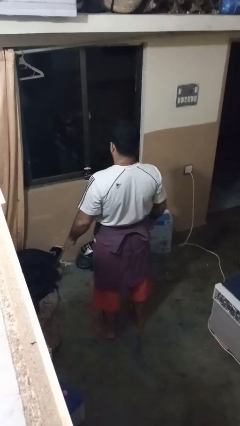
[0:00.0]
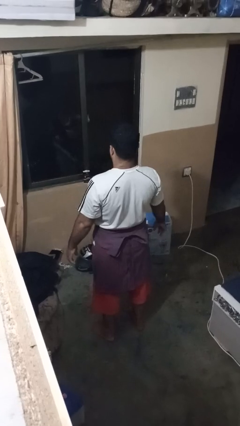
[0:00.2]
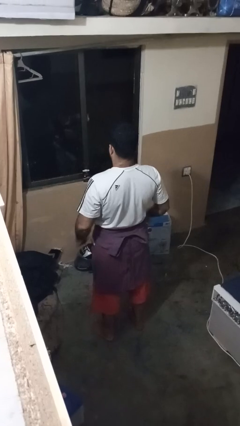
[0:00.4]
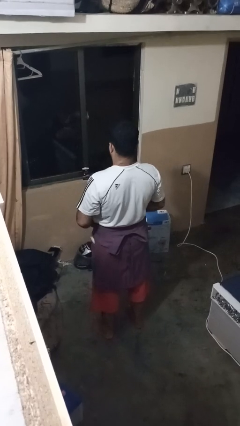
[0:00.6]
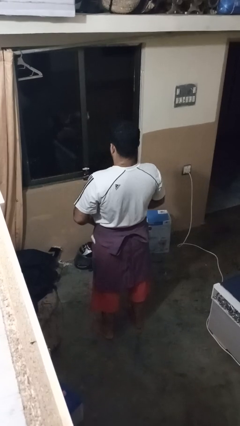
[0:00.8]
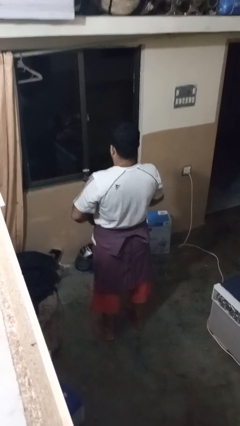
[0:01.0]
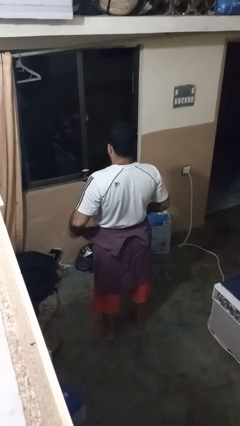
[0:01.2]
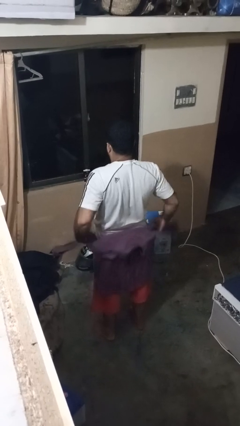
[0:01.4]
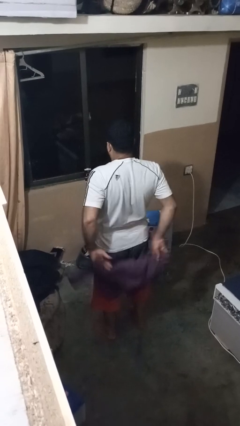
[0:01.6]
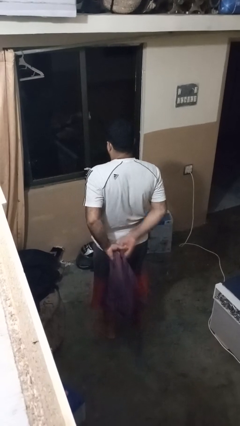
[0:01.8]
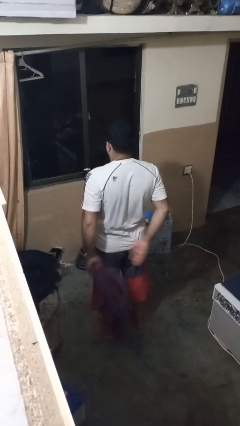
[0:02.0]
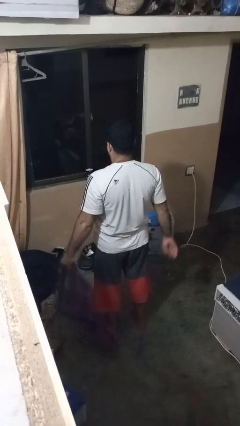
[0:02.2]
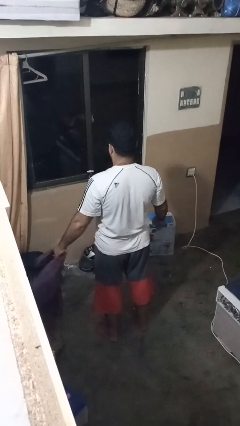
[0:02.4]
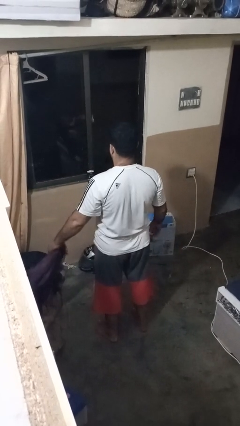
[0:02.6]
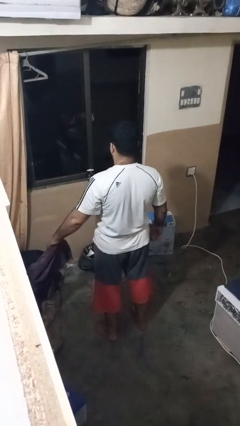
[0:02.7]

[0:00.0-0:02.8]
person unties jacket around waist

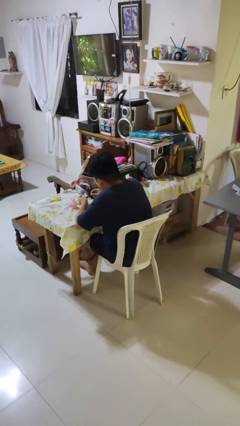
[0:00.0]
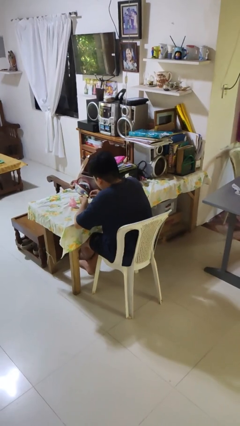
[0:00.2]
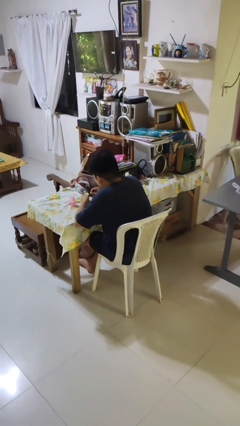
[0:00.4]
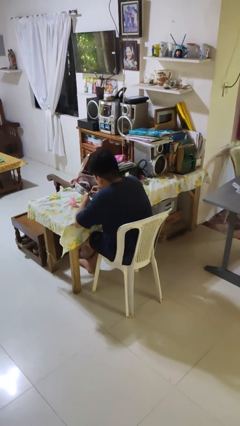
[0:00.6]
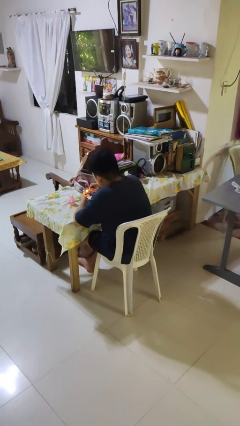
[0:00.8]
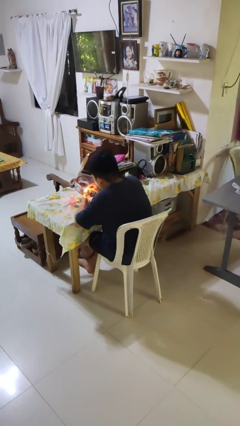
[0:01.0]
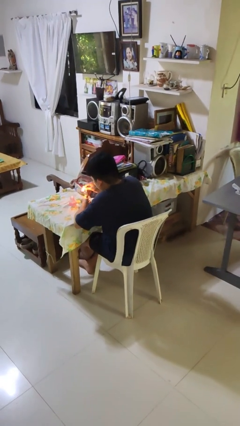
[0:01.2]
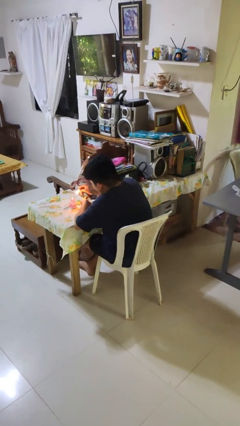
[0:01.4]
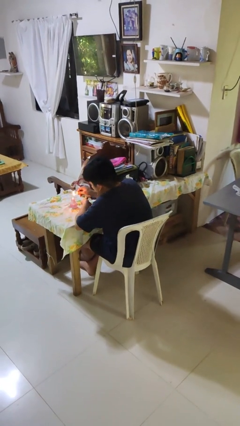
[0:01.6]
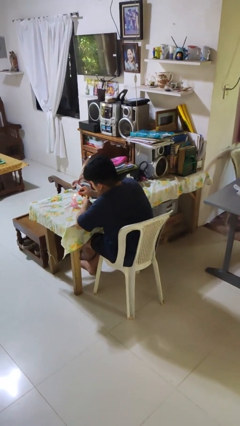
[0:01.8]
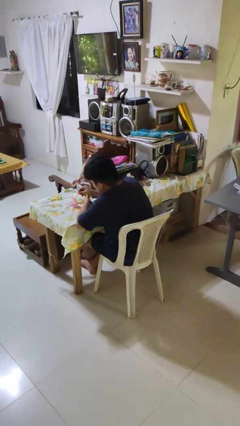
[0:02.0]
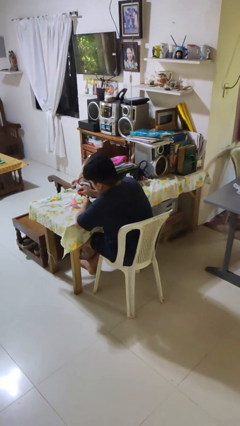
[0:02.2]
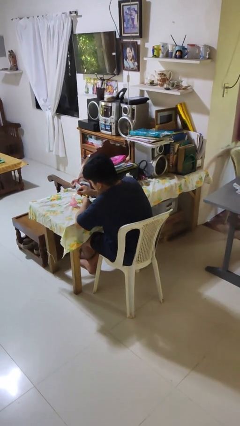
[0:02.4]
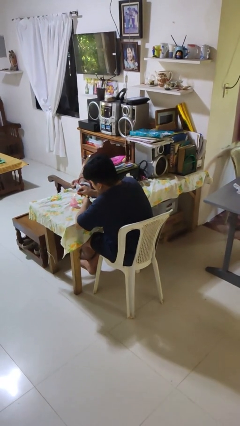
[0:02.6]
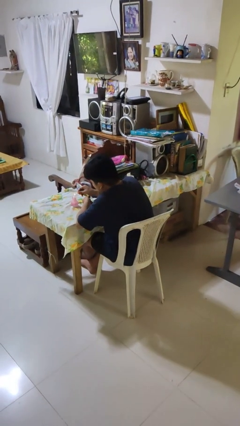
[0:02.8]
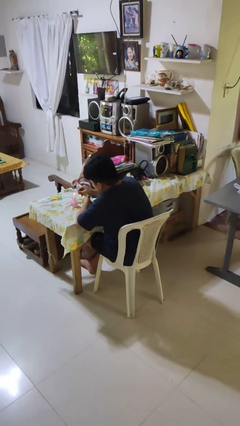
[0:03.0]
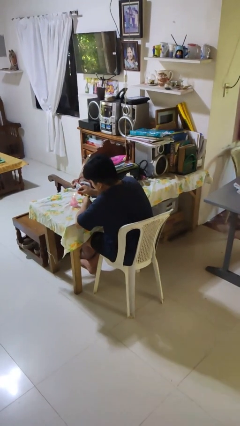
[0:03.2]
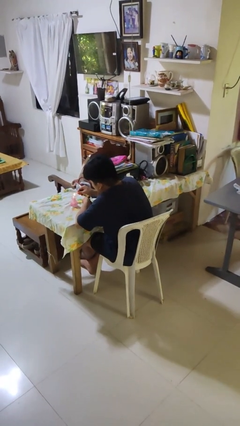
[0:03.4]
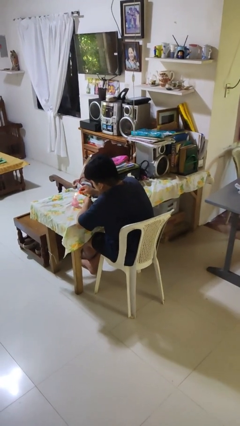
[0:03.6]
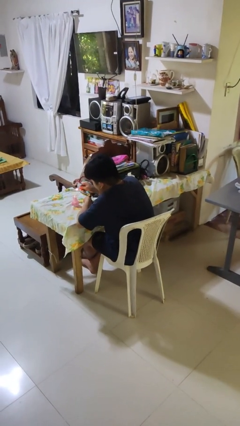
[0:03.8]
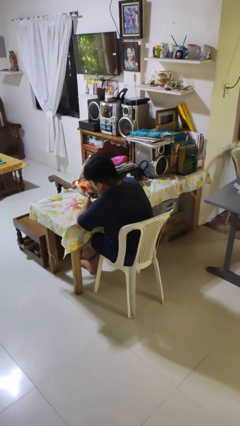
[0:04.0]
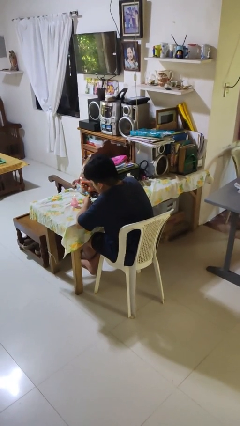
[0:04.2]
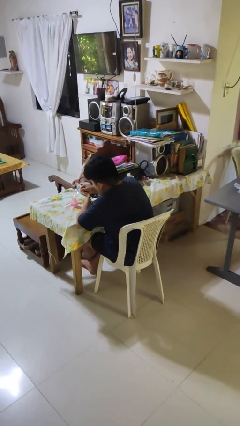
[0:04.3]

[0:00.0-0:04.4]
person lights candle

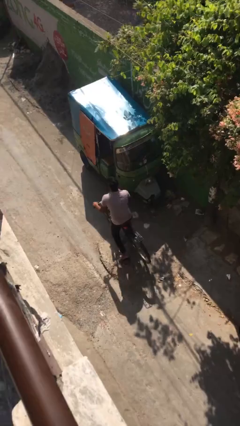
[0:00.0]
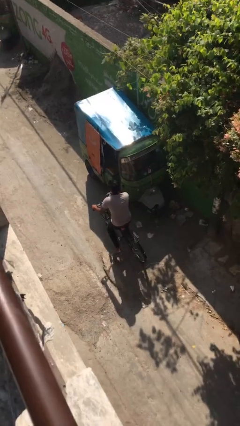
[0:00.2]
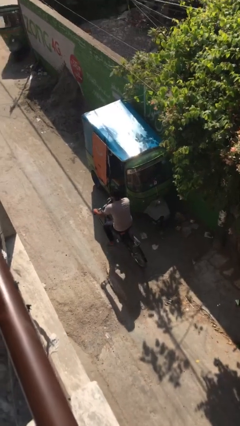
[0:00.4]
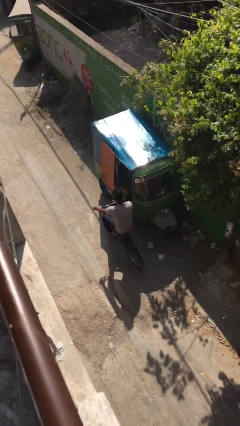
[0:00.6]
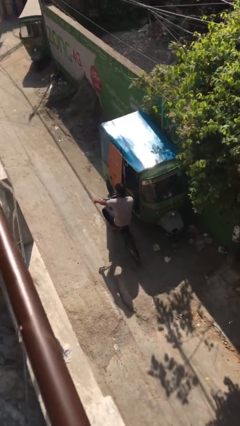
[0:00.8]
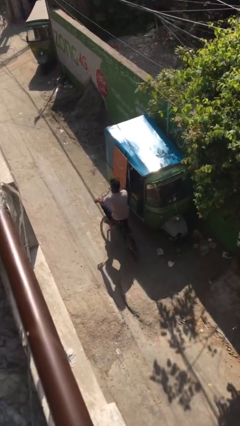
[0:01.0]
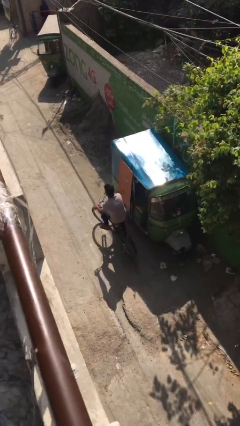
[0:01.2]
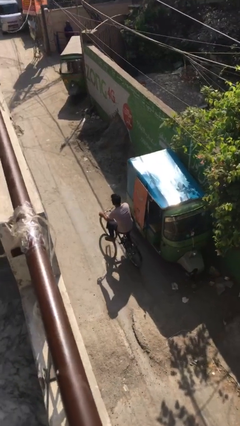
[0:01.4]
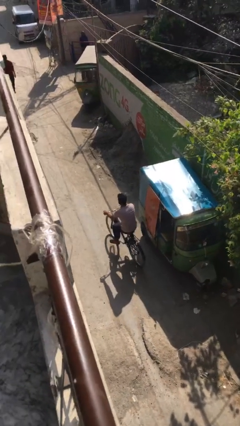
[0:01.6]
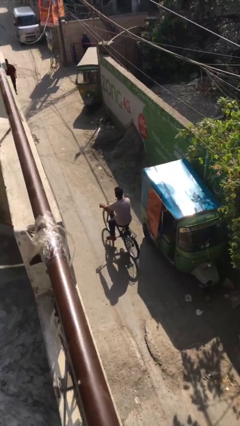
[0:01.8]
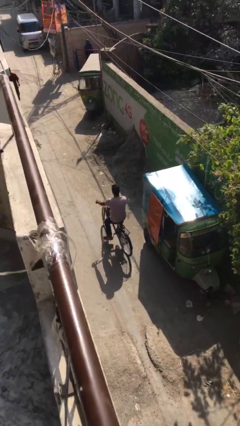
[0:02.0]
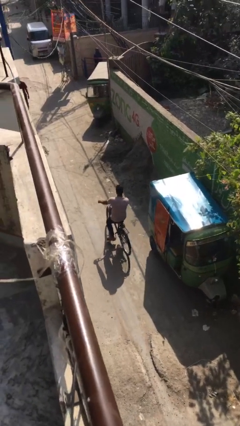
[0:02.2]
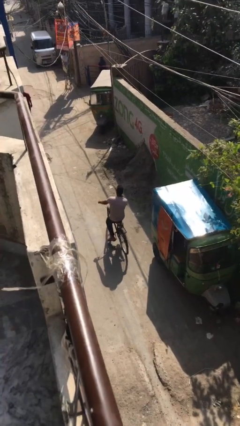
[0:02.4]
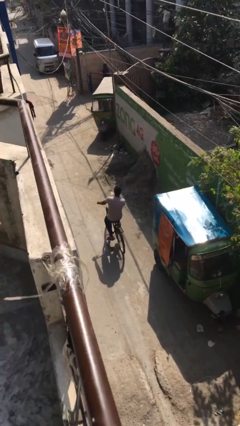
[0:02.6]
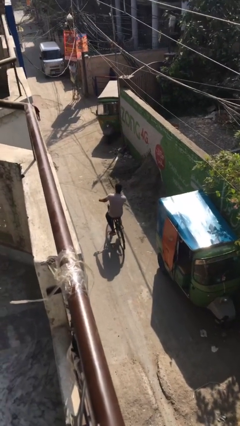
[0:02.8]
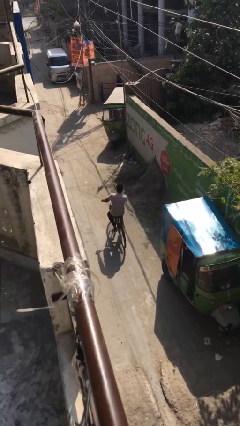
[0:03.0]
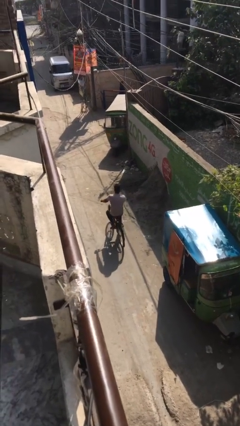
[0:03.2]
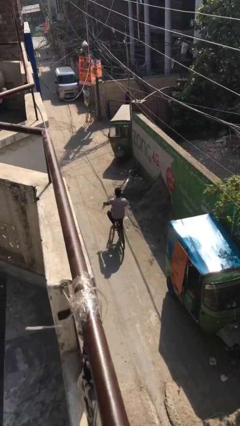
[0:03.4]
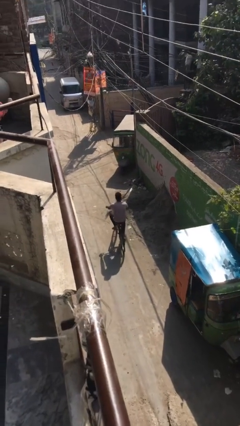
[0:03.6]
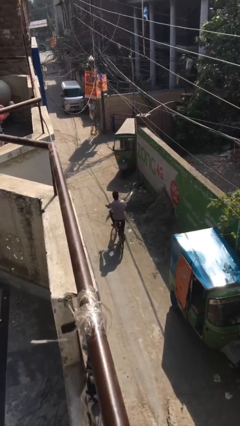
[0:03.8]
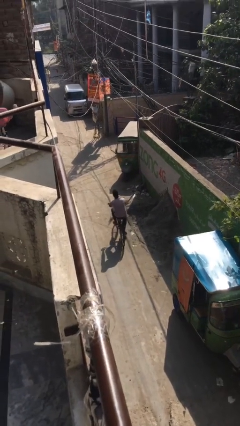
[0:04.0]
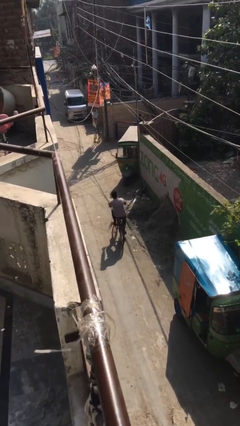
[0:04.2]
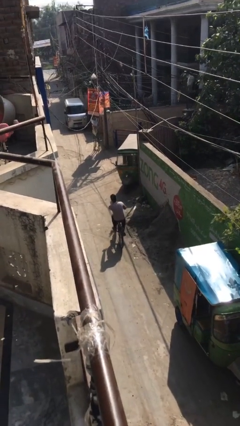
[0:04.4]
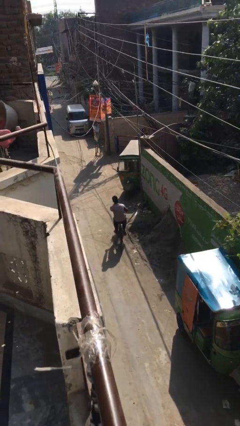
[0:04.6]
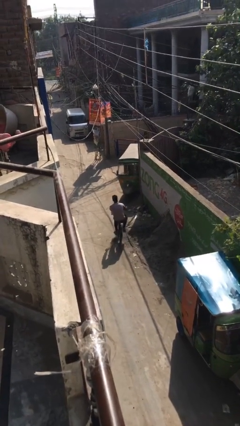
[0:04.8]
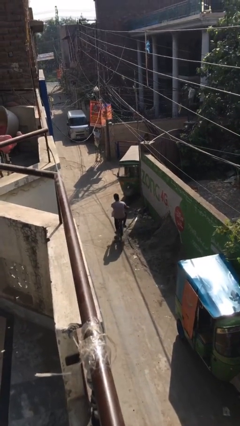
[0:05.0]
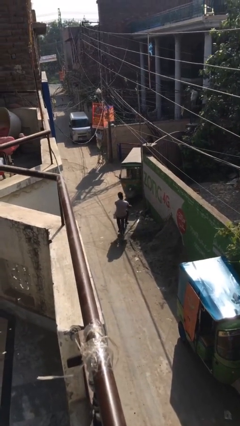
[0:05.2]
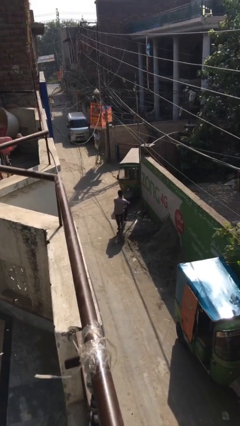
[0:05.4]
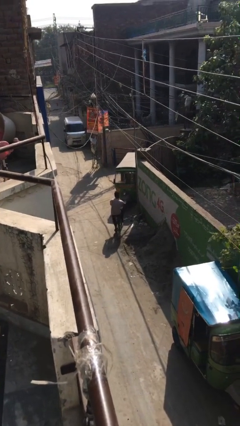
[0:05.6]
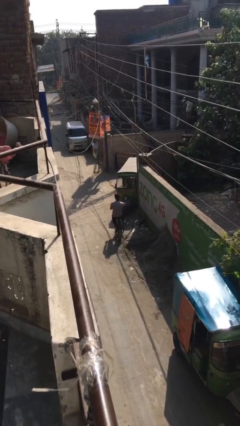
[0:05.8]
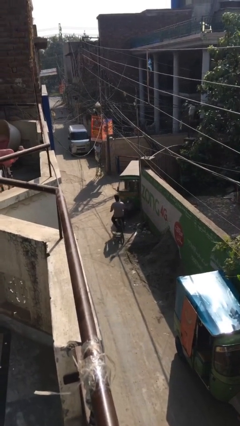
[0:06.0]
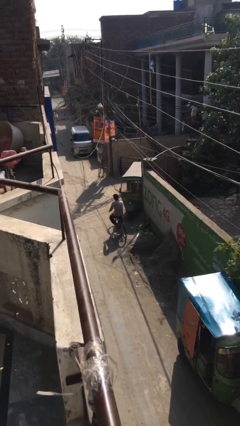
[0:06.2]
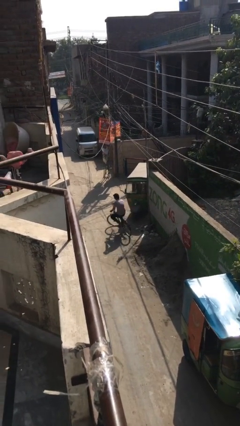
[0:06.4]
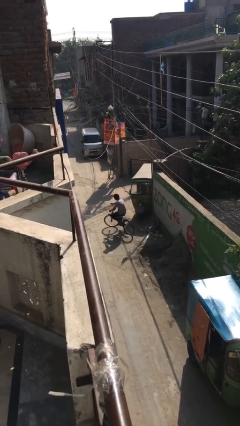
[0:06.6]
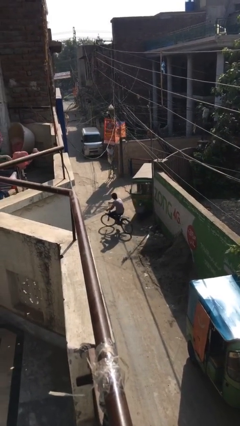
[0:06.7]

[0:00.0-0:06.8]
person rides bicycle

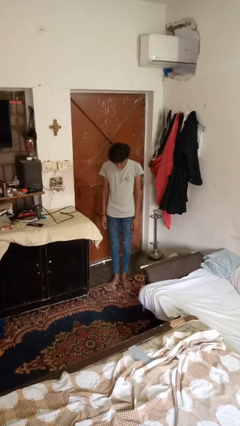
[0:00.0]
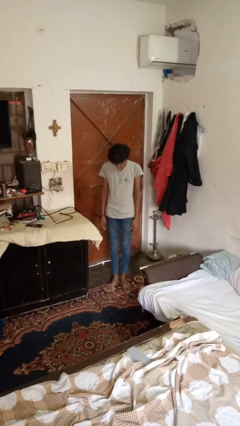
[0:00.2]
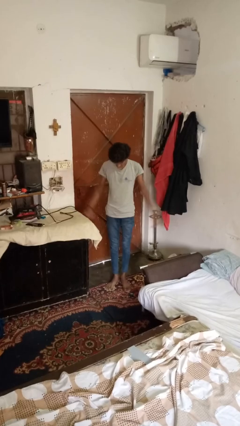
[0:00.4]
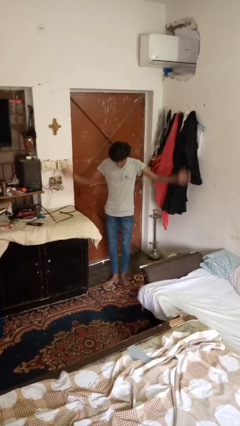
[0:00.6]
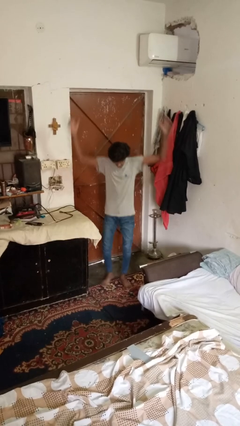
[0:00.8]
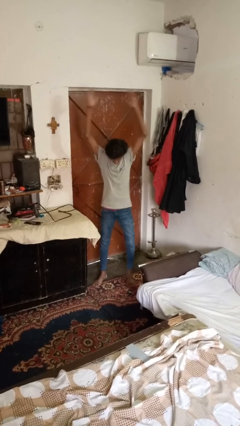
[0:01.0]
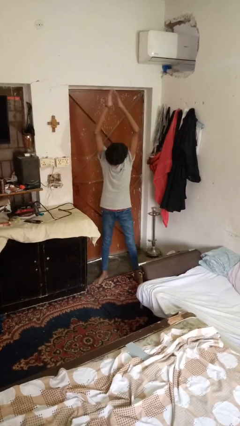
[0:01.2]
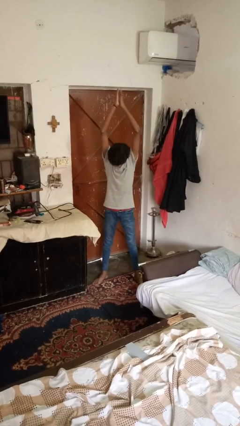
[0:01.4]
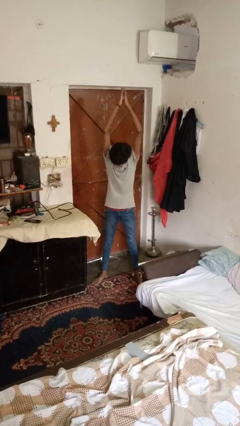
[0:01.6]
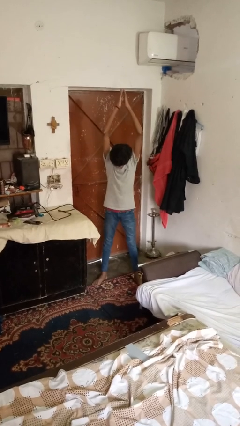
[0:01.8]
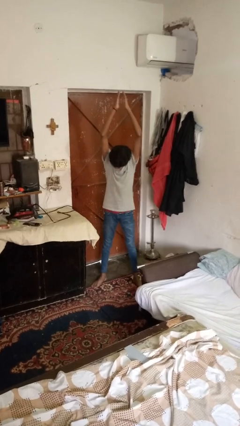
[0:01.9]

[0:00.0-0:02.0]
person exercises with jumping jacks

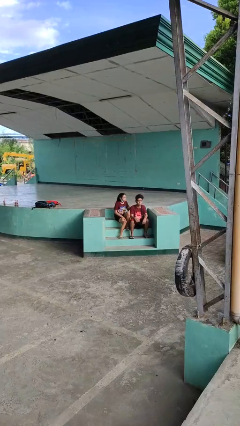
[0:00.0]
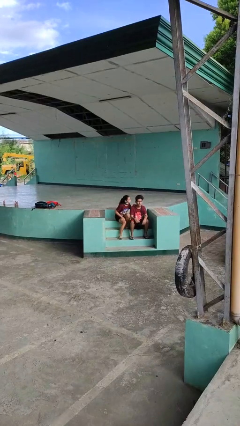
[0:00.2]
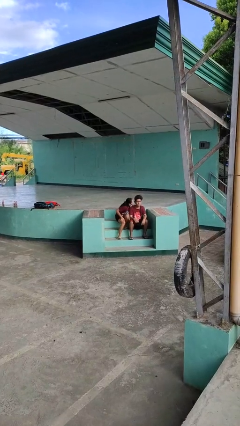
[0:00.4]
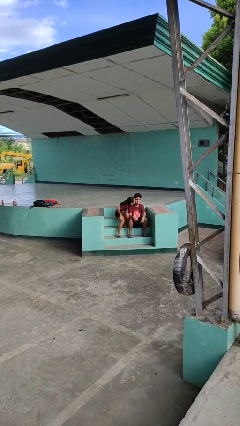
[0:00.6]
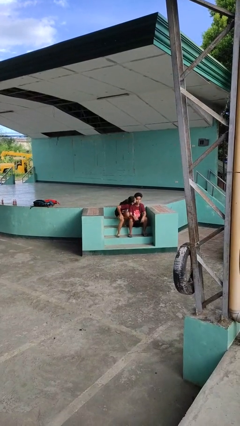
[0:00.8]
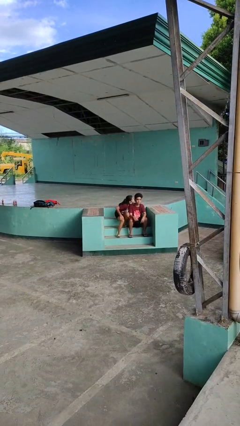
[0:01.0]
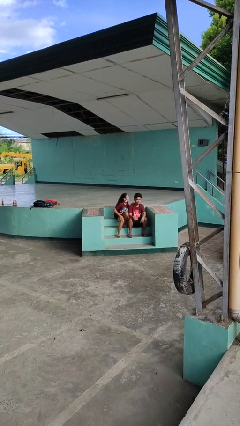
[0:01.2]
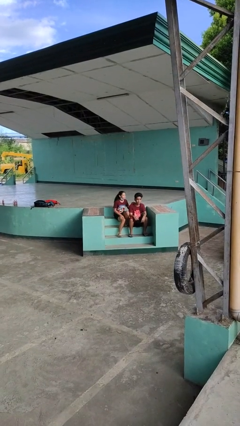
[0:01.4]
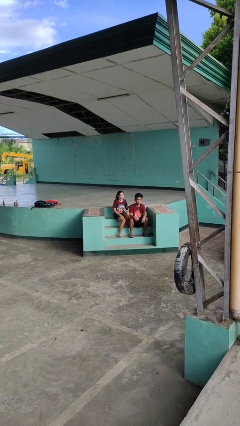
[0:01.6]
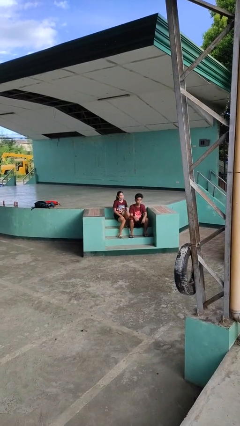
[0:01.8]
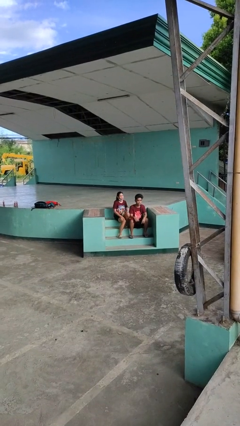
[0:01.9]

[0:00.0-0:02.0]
person kisses cheek of person
